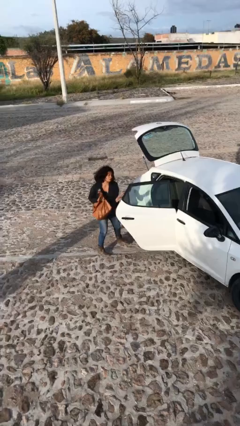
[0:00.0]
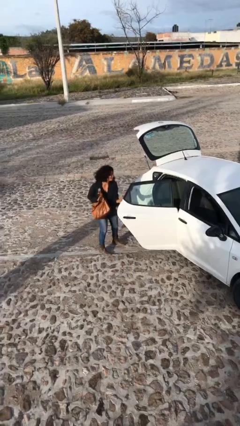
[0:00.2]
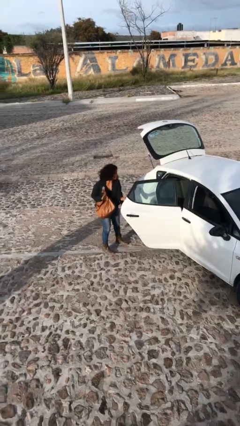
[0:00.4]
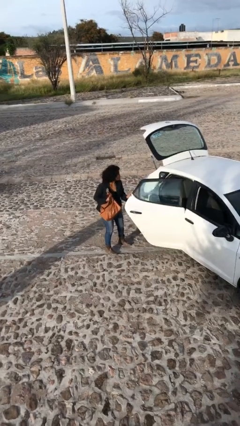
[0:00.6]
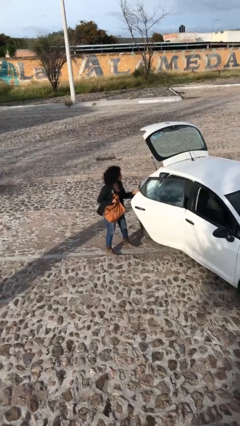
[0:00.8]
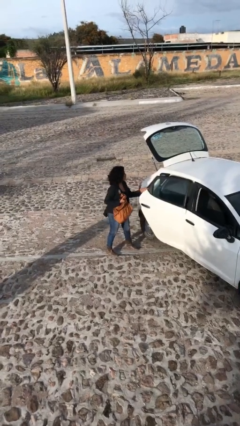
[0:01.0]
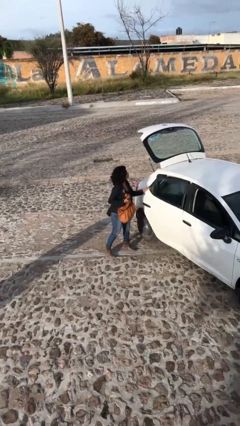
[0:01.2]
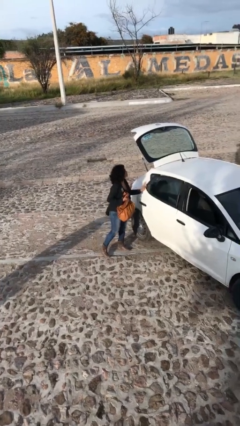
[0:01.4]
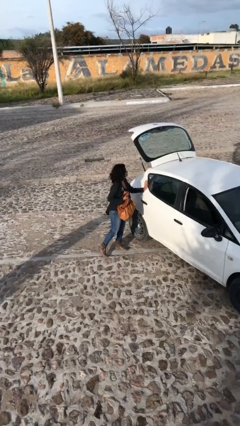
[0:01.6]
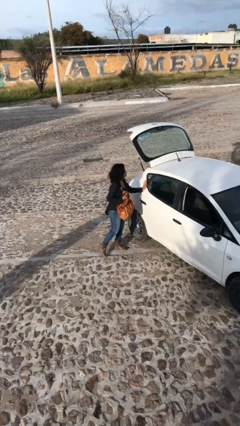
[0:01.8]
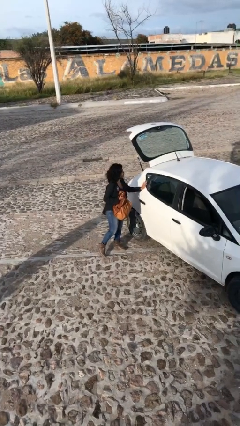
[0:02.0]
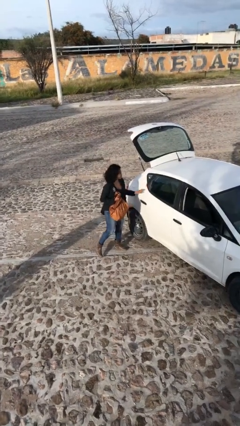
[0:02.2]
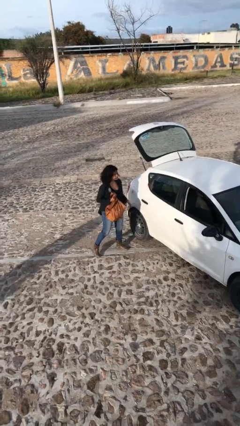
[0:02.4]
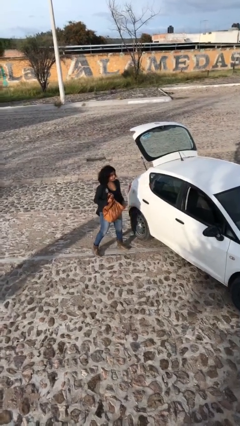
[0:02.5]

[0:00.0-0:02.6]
person closes car door

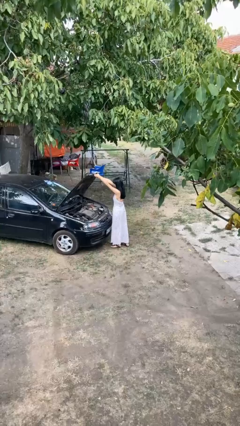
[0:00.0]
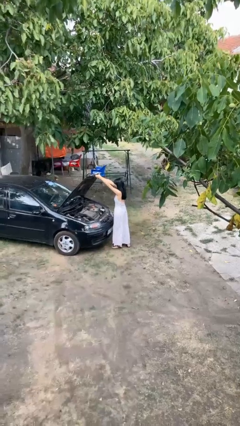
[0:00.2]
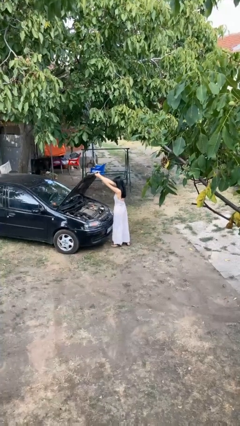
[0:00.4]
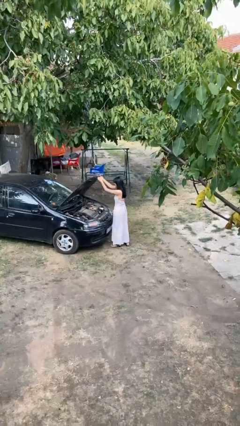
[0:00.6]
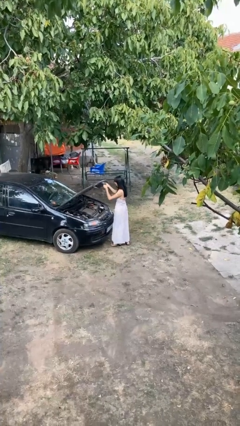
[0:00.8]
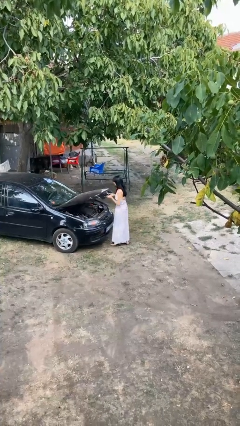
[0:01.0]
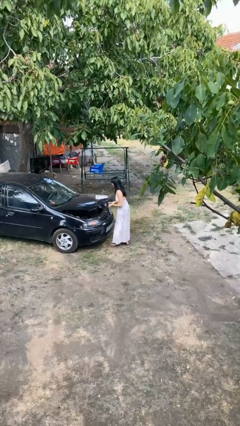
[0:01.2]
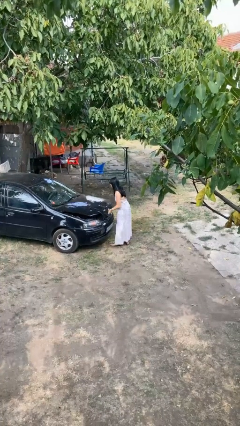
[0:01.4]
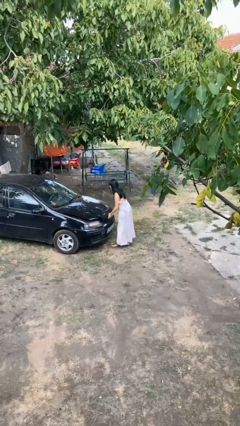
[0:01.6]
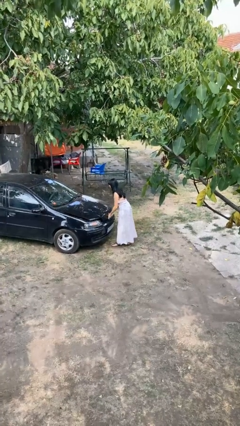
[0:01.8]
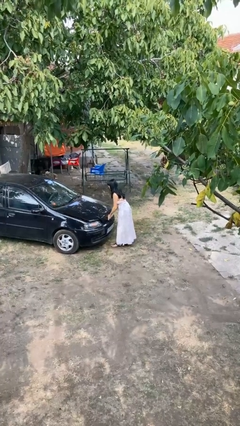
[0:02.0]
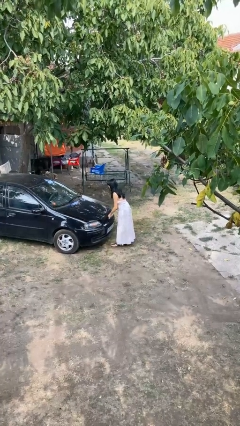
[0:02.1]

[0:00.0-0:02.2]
person closes car hood

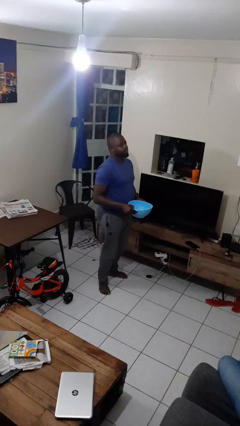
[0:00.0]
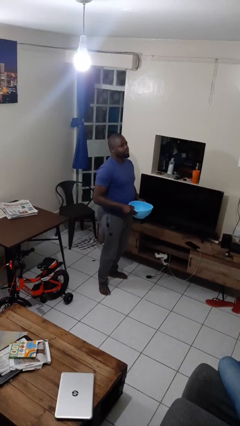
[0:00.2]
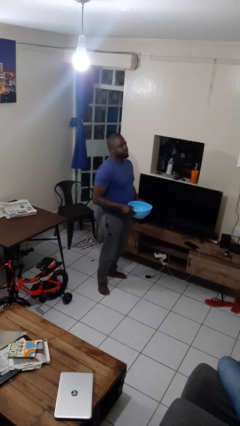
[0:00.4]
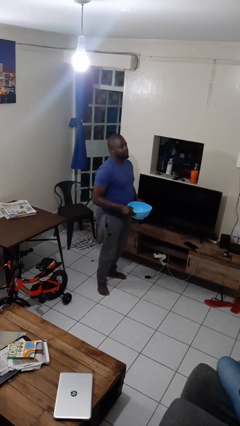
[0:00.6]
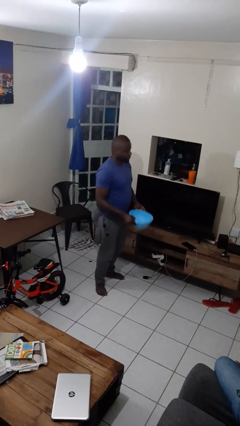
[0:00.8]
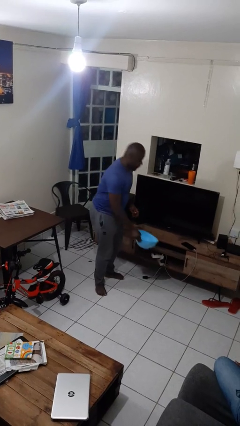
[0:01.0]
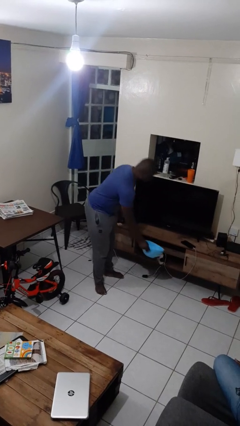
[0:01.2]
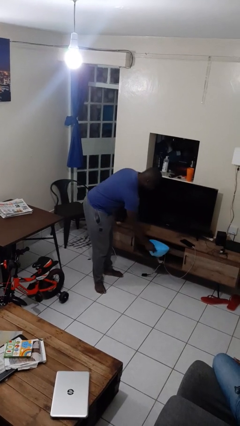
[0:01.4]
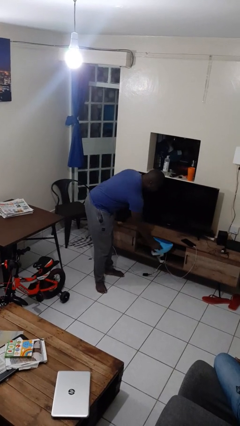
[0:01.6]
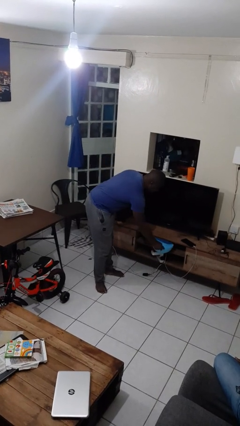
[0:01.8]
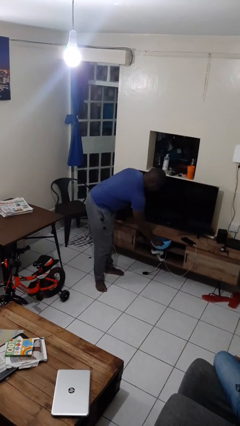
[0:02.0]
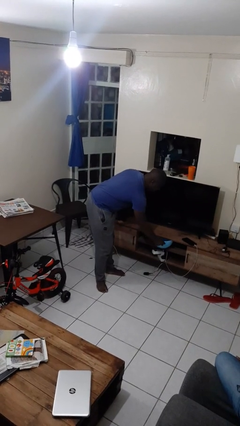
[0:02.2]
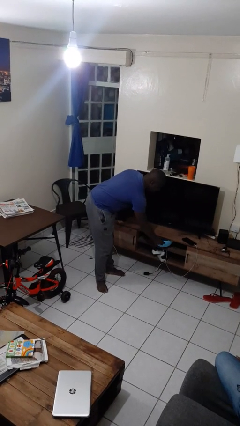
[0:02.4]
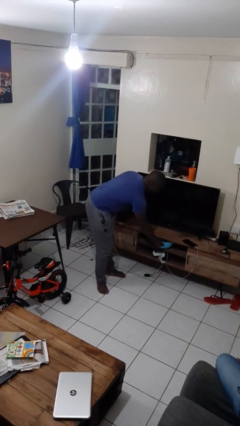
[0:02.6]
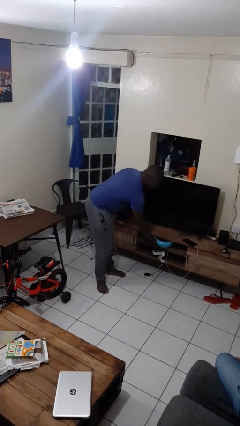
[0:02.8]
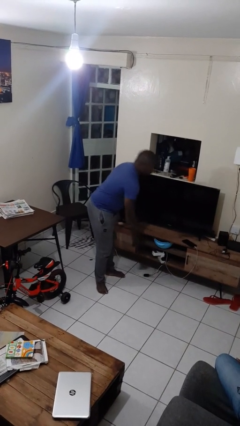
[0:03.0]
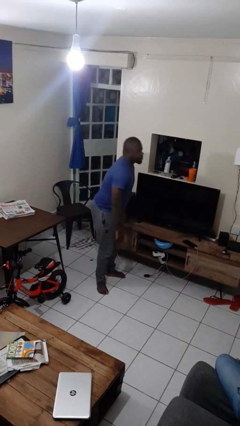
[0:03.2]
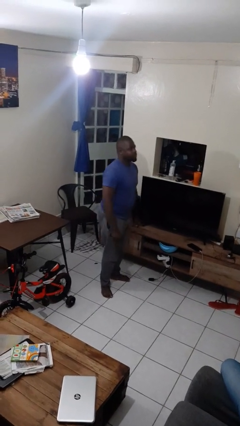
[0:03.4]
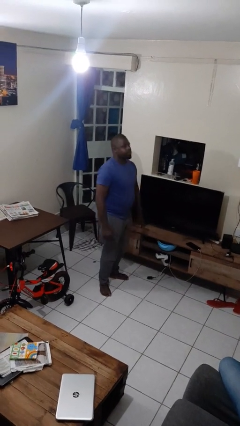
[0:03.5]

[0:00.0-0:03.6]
person puts down object into cabinet

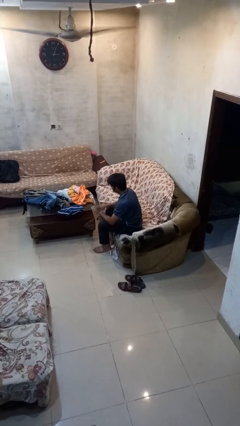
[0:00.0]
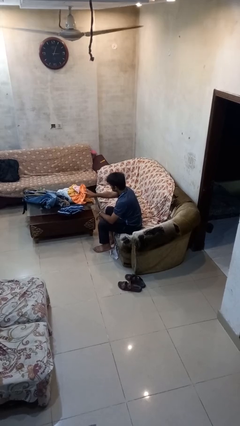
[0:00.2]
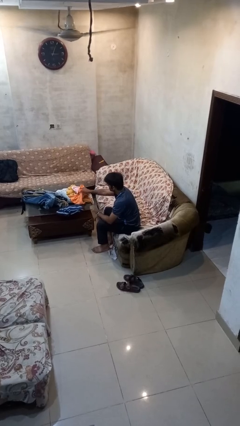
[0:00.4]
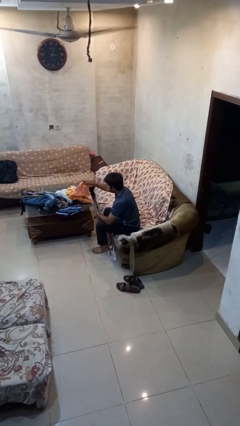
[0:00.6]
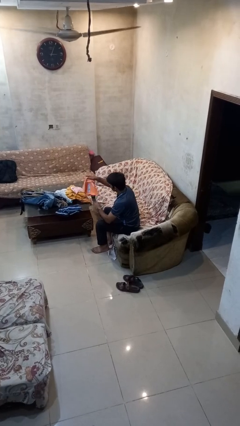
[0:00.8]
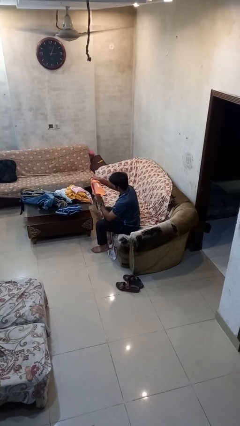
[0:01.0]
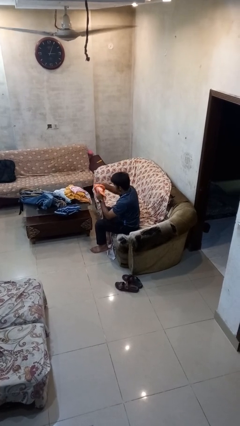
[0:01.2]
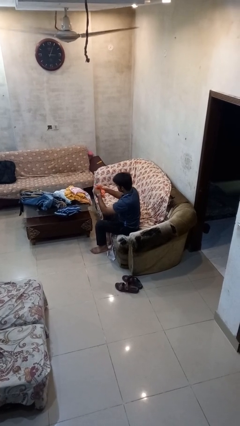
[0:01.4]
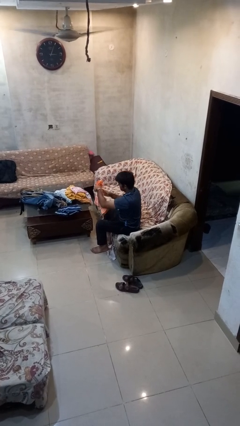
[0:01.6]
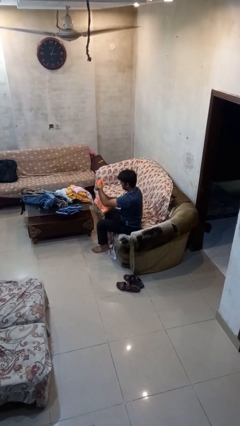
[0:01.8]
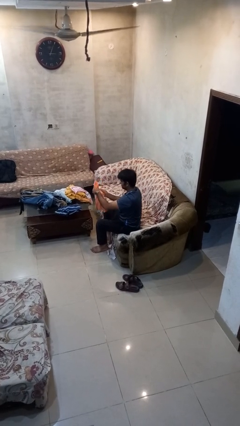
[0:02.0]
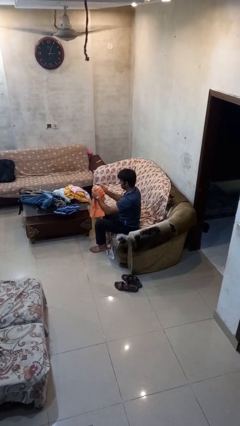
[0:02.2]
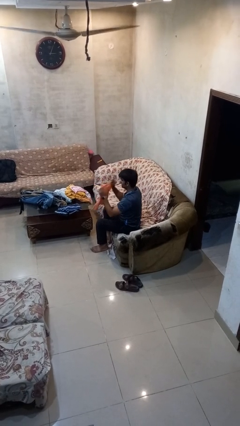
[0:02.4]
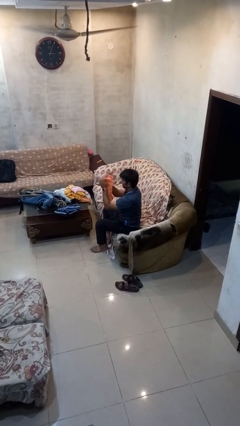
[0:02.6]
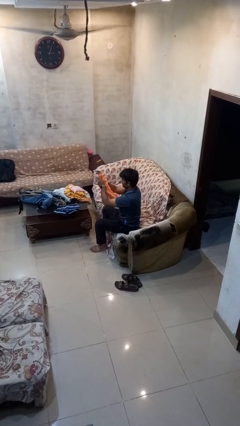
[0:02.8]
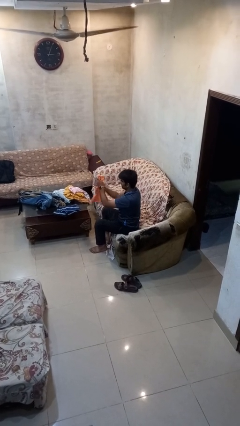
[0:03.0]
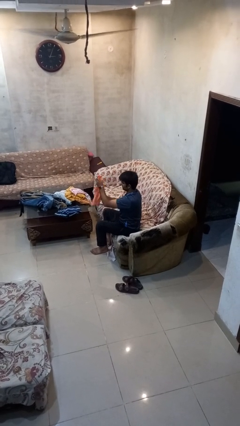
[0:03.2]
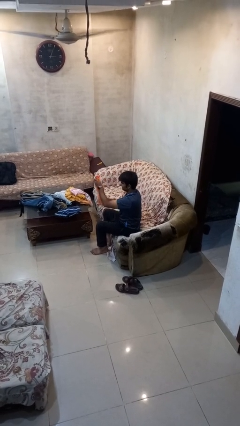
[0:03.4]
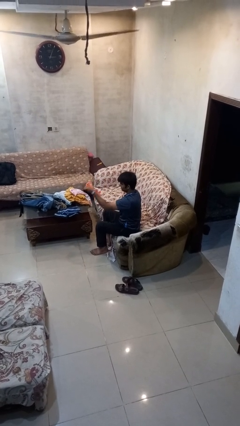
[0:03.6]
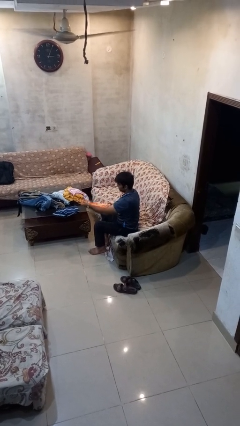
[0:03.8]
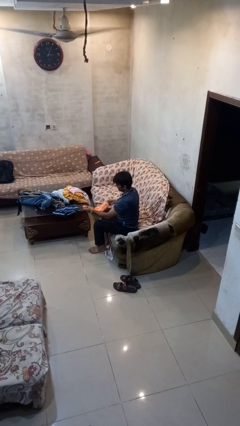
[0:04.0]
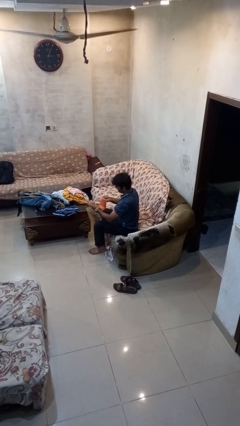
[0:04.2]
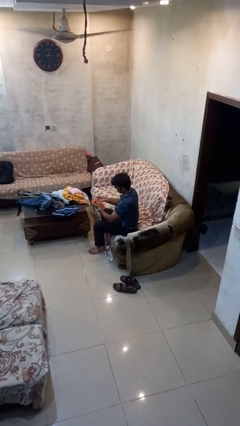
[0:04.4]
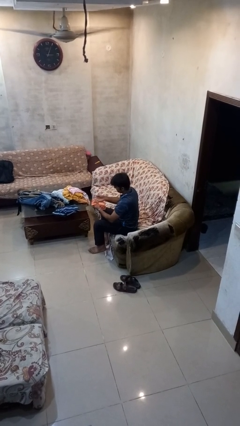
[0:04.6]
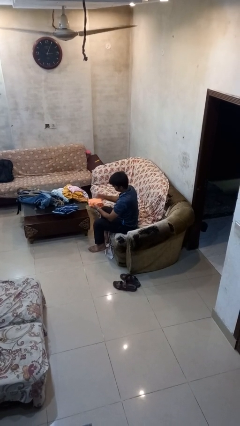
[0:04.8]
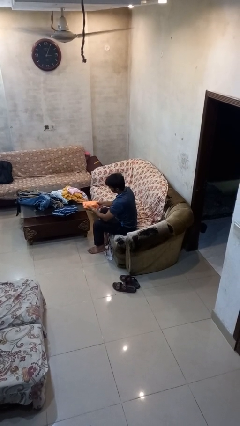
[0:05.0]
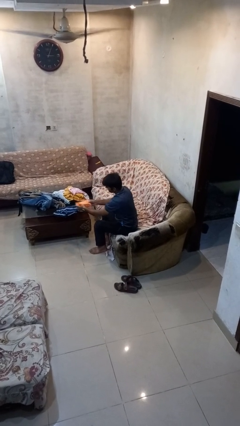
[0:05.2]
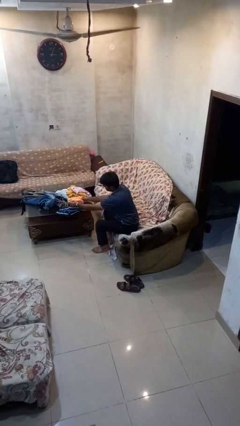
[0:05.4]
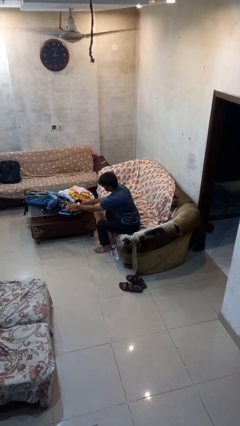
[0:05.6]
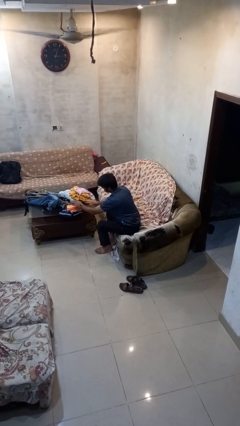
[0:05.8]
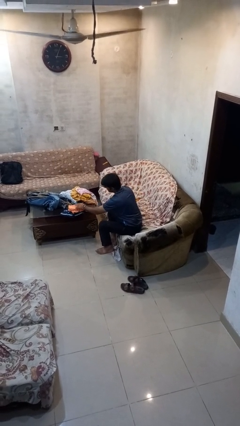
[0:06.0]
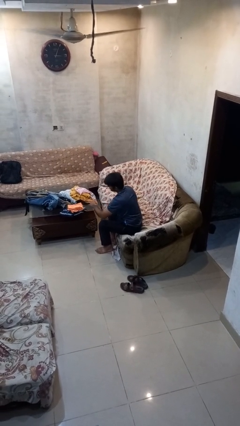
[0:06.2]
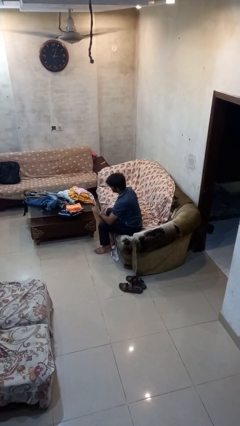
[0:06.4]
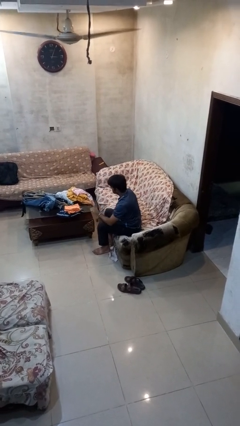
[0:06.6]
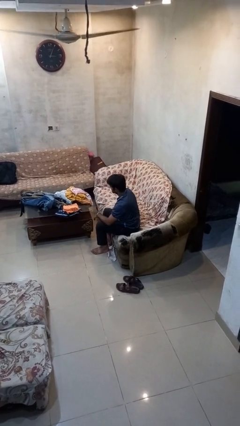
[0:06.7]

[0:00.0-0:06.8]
person folds shirt

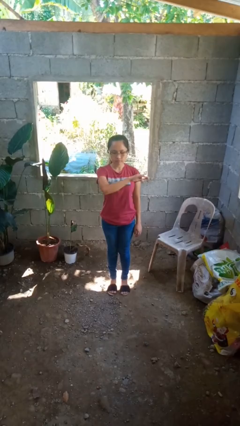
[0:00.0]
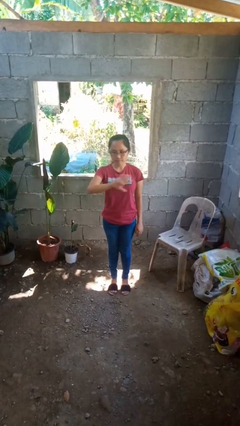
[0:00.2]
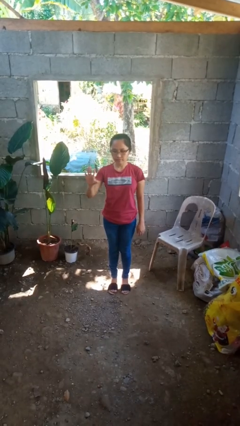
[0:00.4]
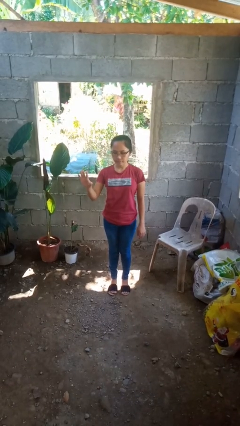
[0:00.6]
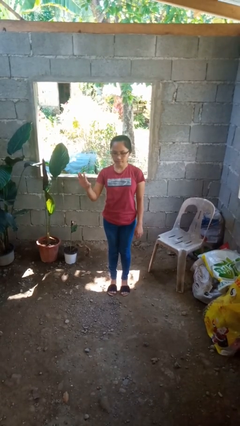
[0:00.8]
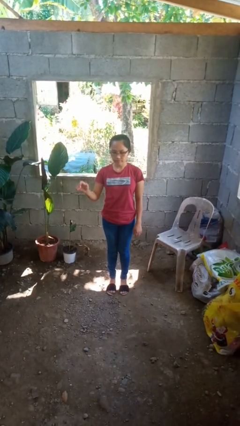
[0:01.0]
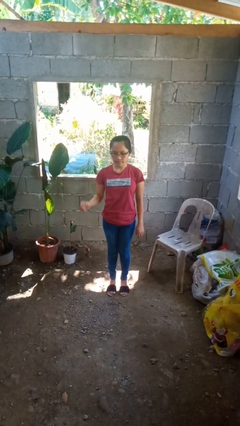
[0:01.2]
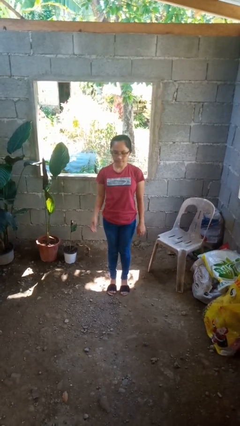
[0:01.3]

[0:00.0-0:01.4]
person gestures swipe right

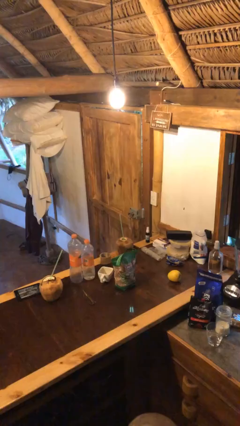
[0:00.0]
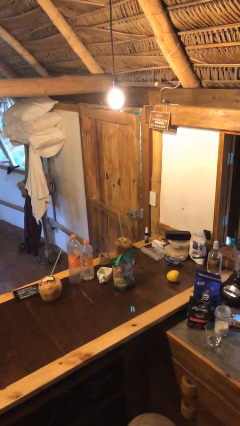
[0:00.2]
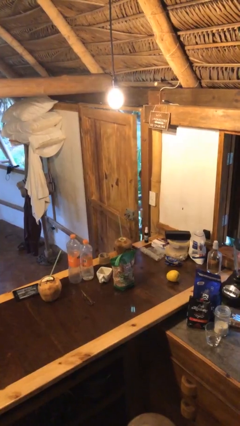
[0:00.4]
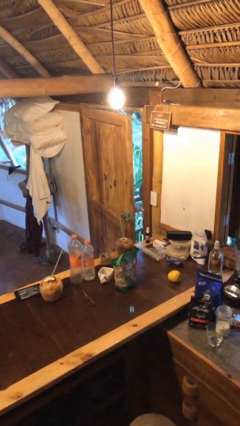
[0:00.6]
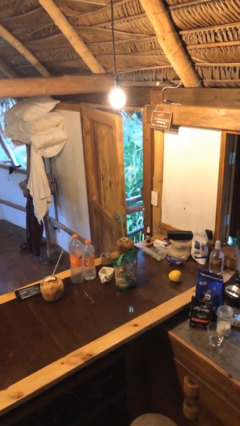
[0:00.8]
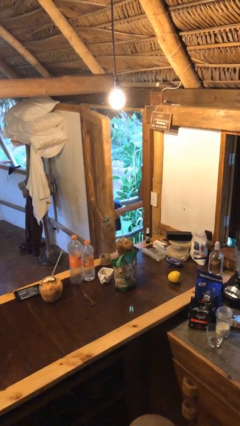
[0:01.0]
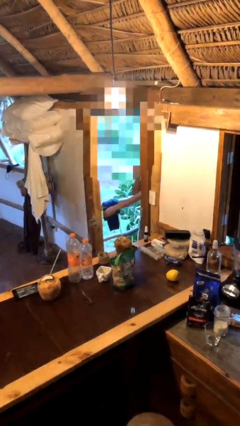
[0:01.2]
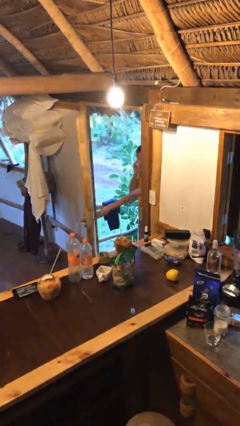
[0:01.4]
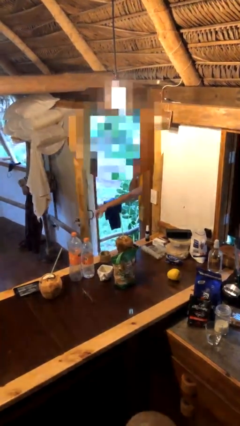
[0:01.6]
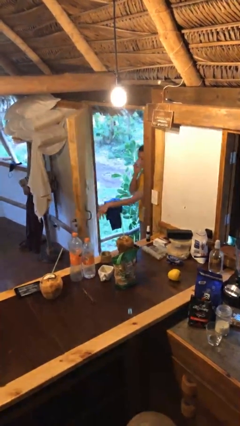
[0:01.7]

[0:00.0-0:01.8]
person opens facility door
